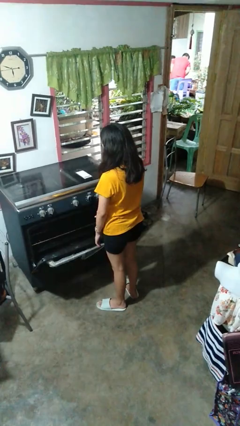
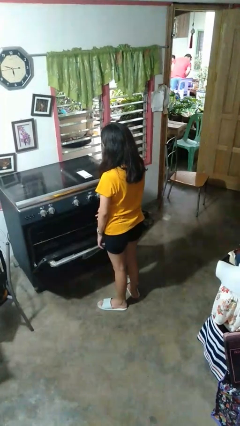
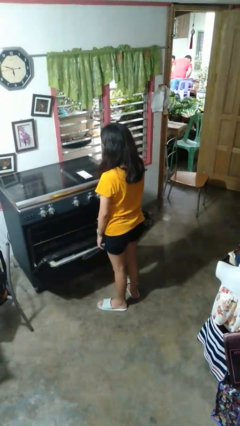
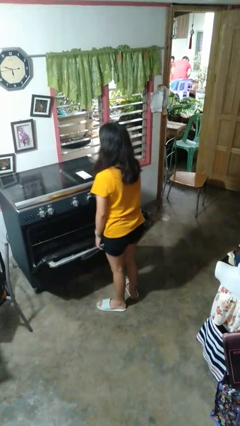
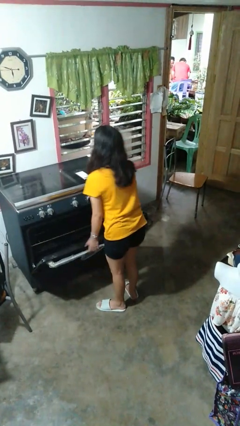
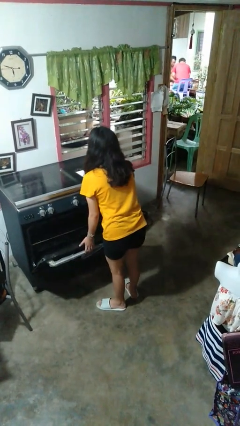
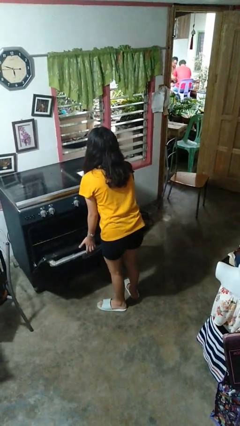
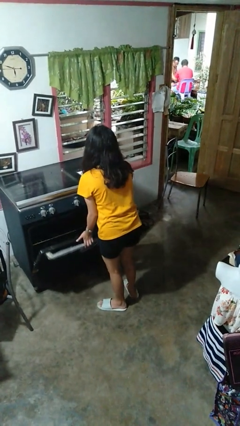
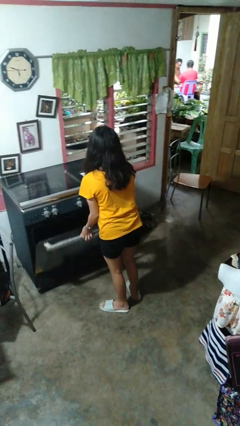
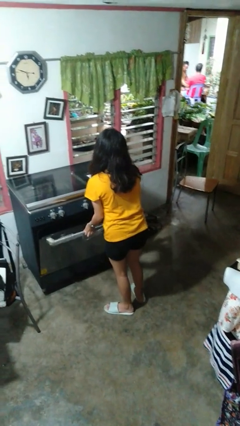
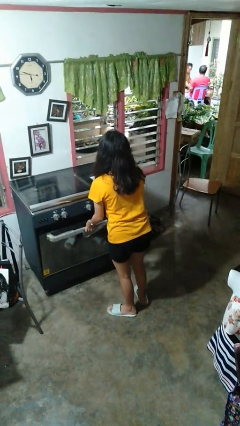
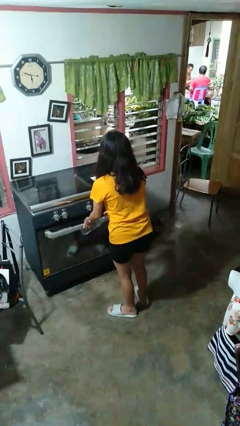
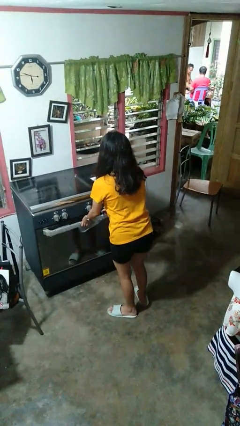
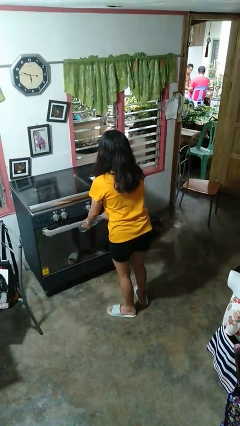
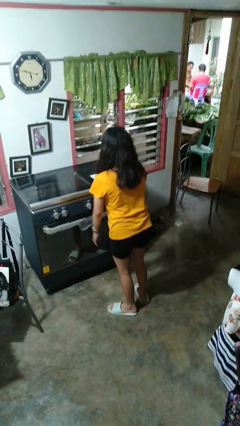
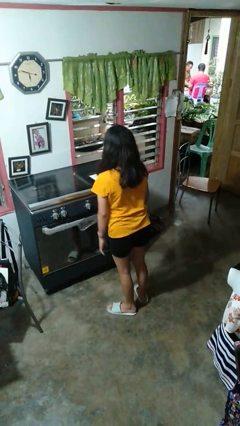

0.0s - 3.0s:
person closes oven door

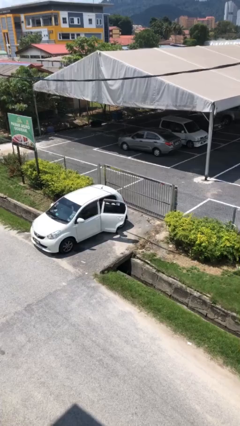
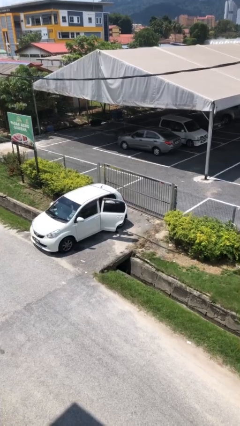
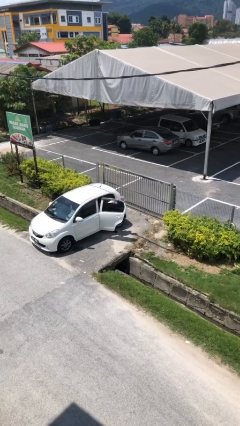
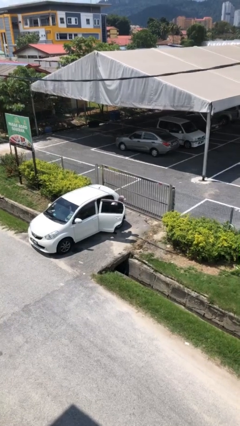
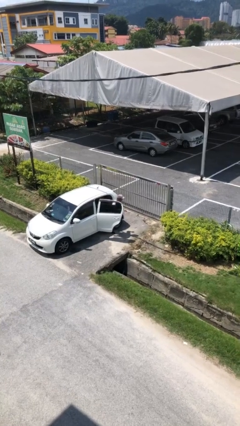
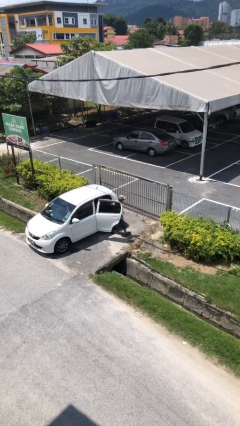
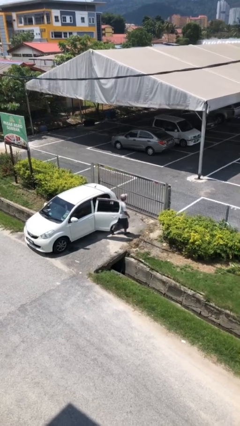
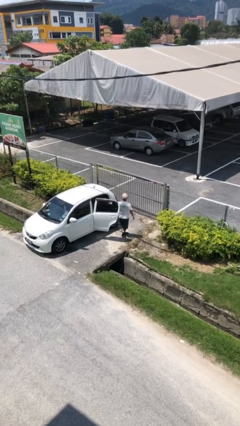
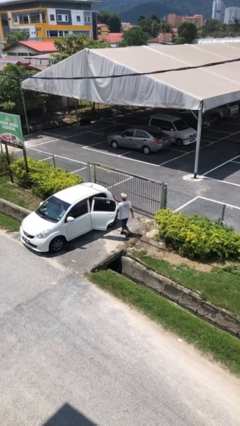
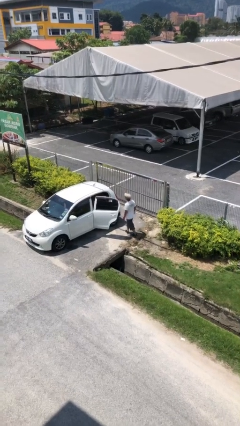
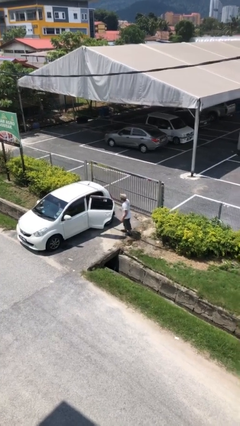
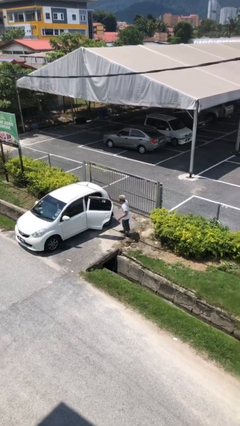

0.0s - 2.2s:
person exits car

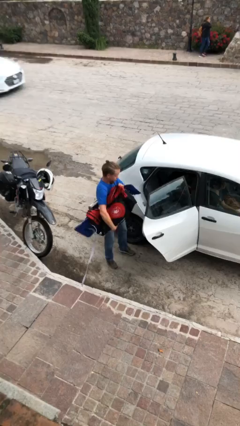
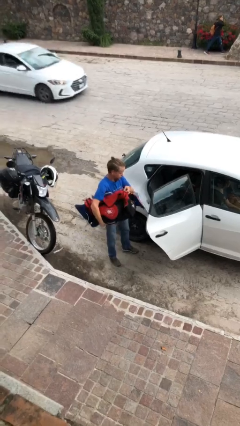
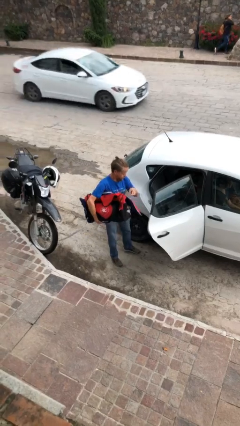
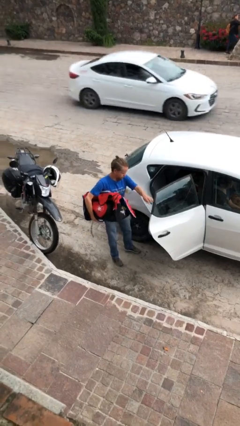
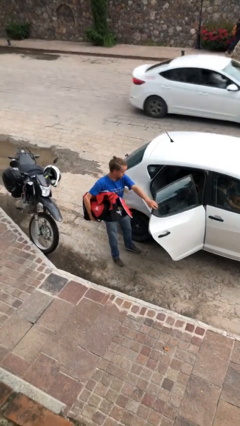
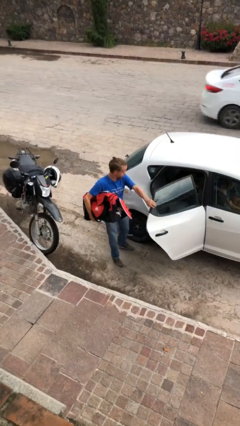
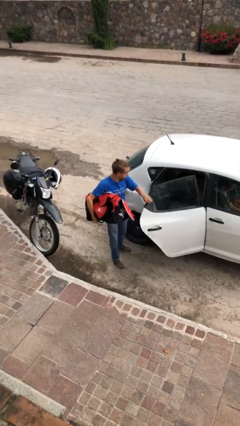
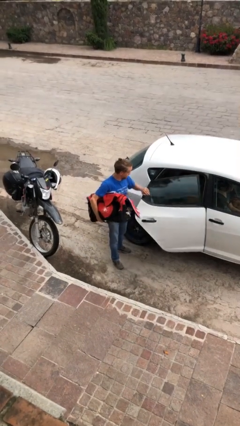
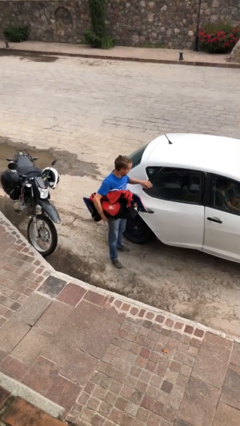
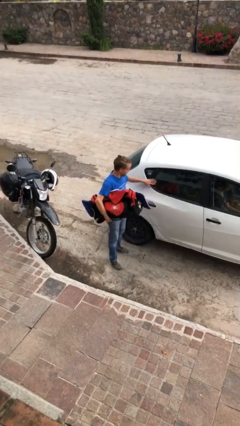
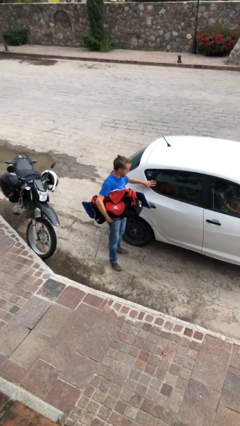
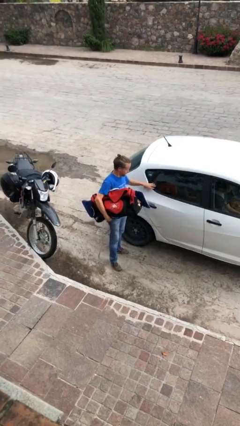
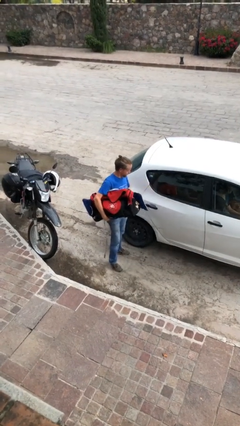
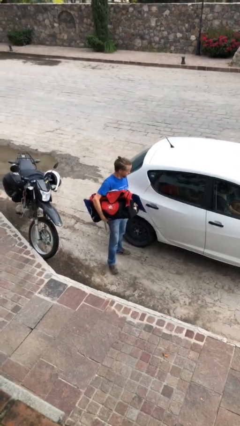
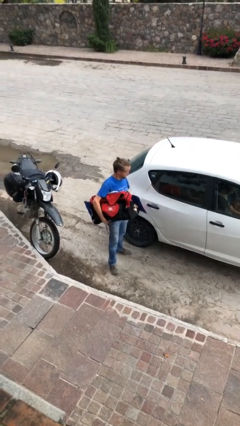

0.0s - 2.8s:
person closes car door

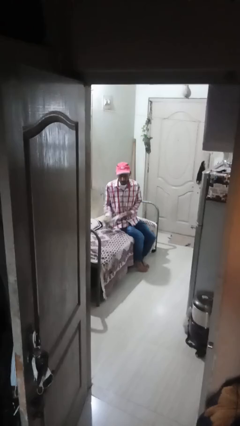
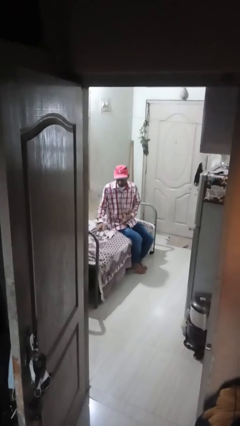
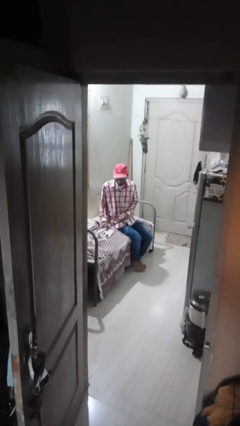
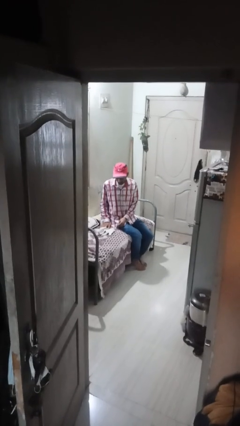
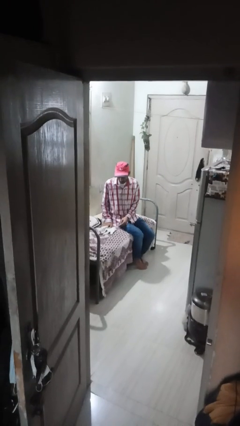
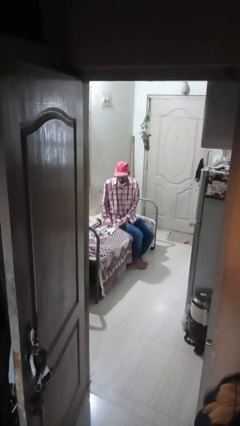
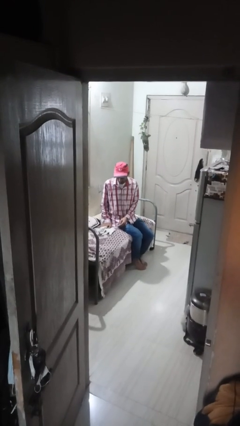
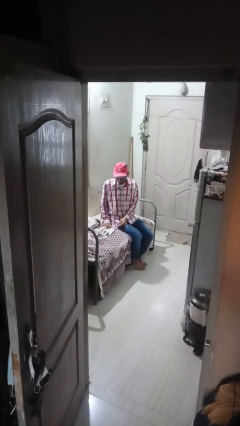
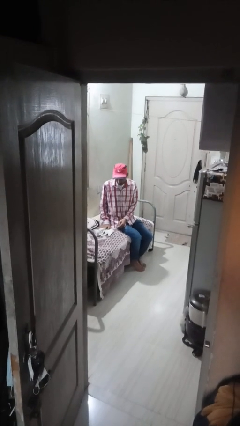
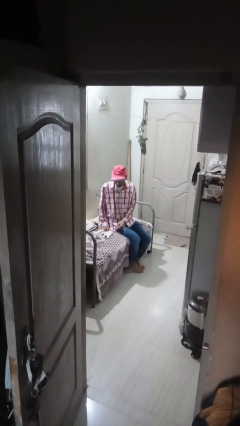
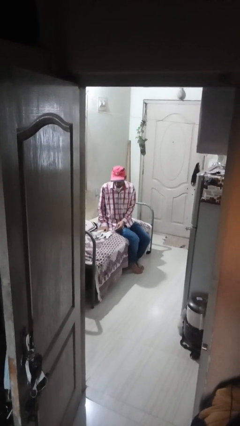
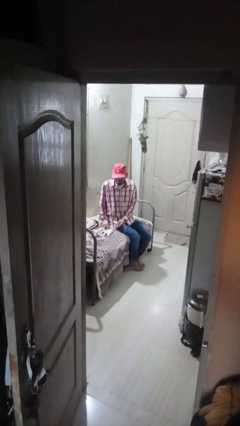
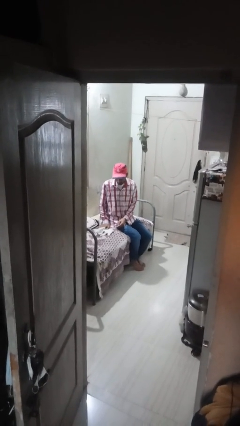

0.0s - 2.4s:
person takes off gloves

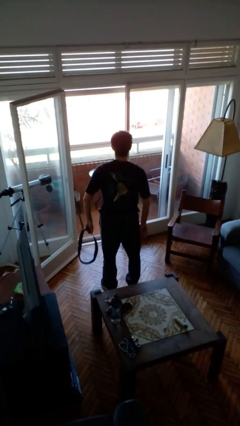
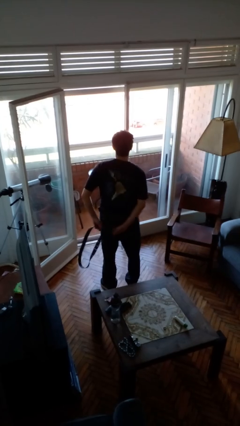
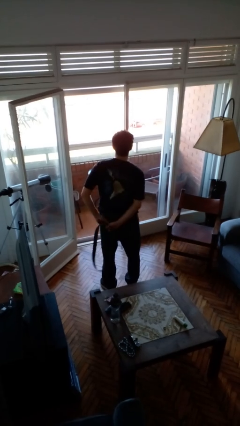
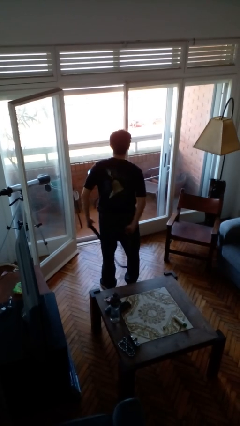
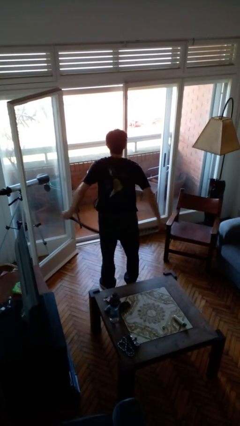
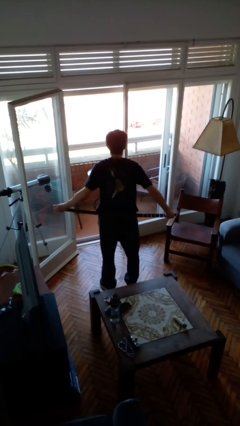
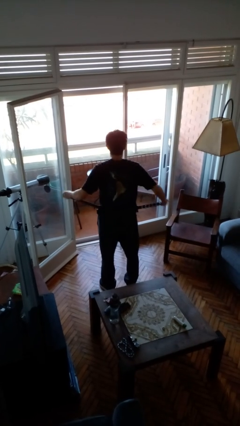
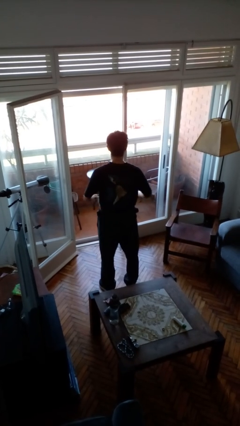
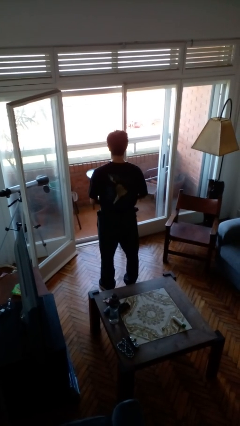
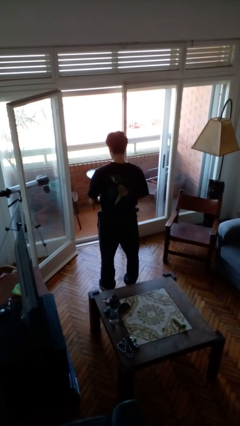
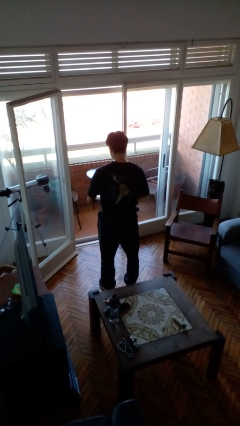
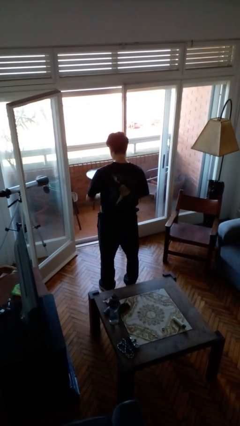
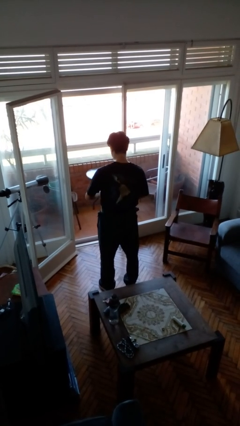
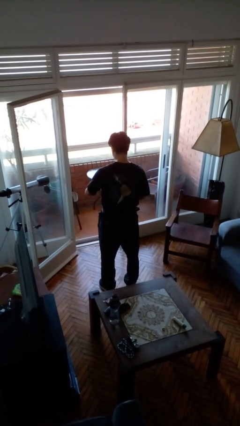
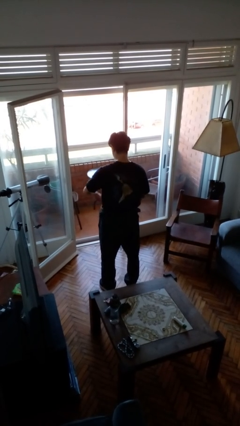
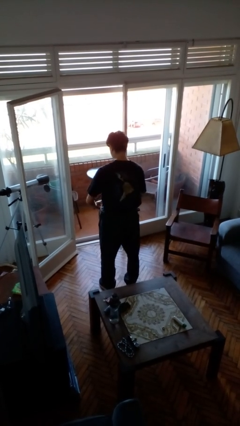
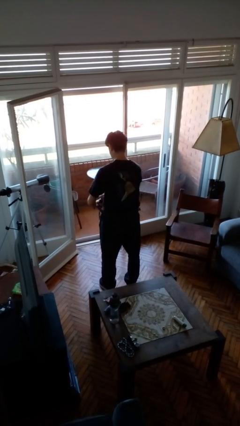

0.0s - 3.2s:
person puts on belt

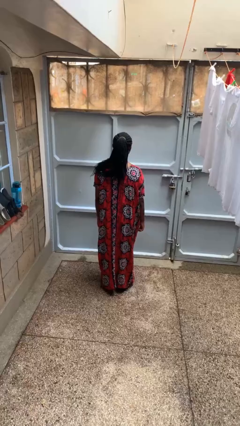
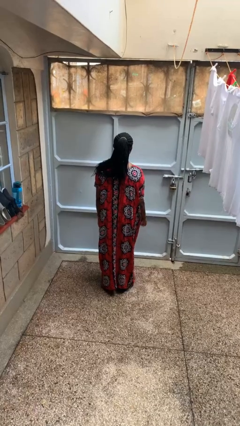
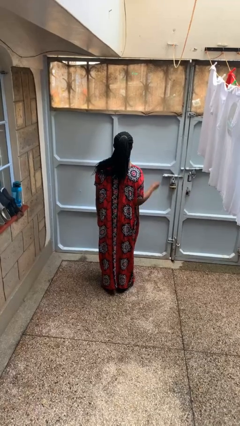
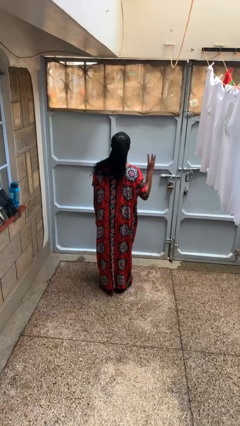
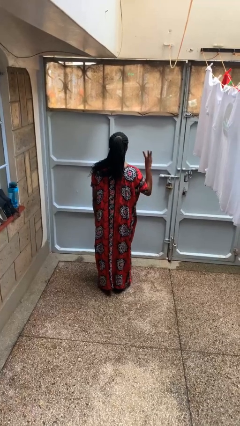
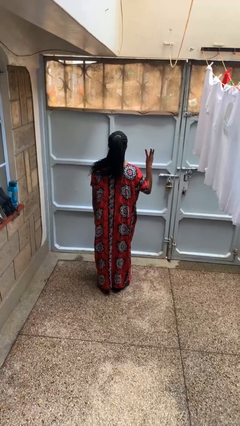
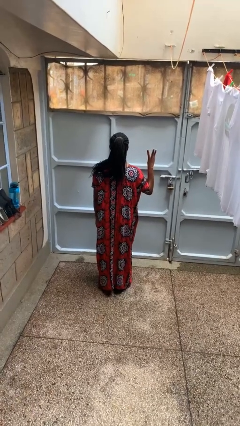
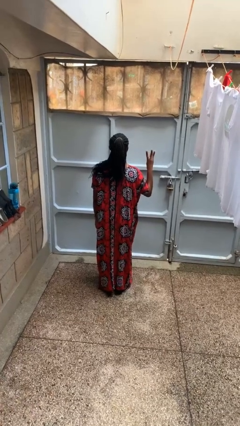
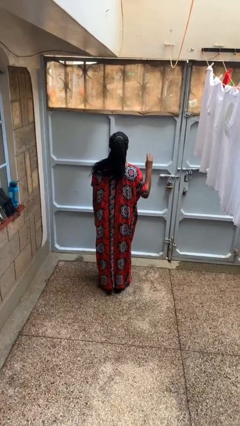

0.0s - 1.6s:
person gestures number three

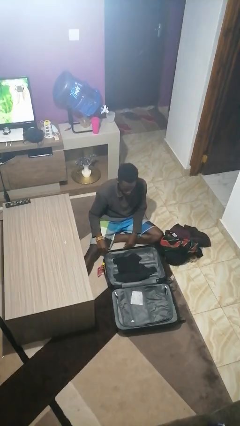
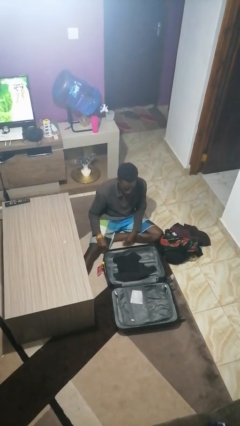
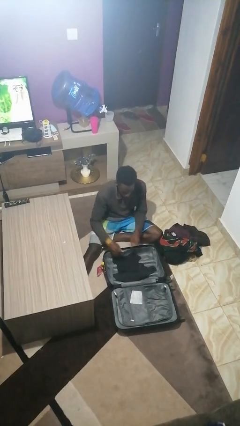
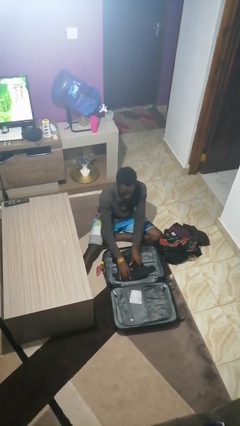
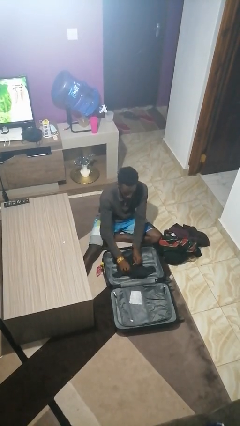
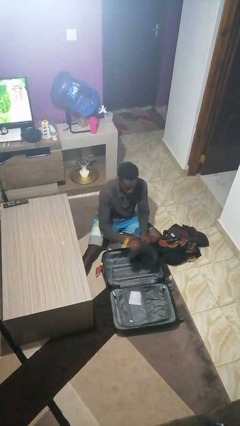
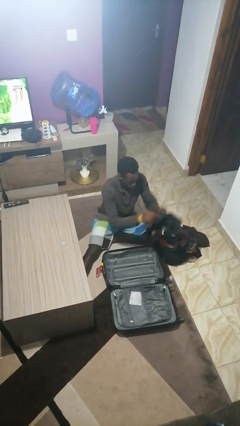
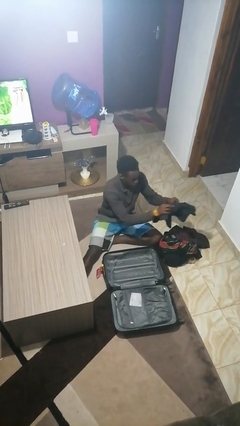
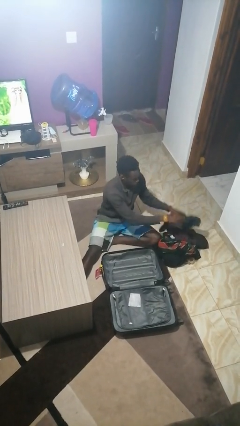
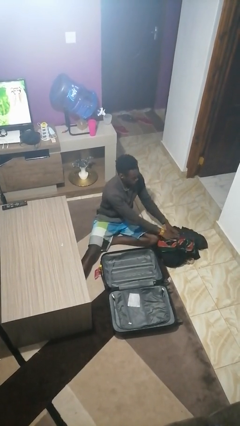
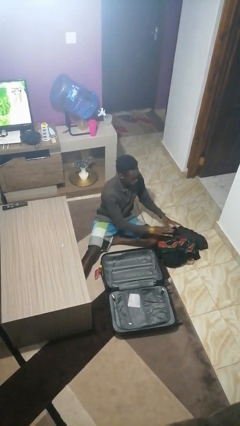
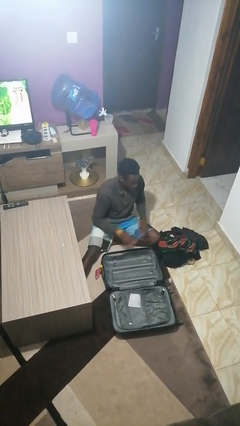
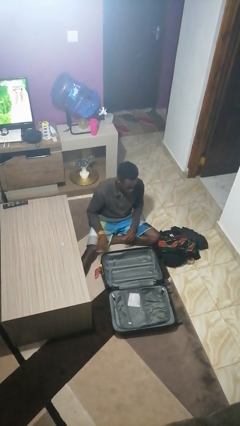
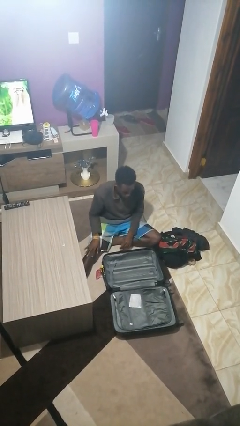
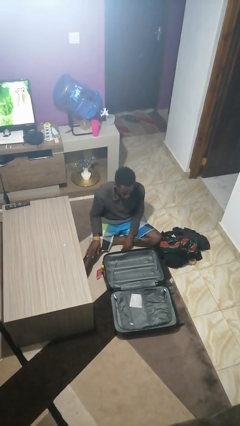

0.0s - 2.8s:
person unloads clothes from suitcase
